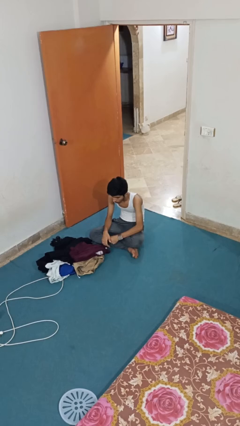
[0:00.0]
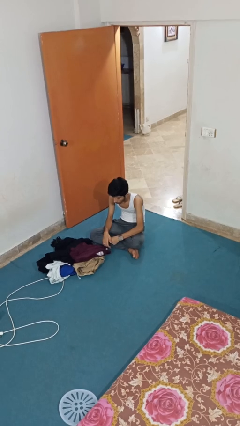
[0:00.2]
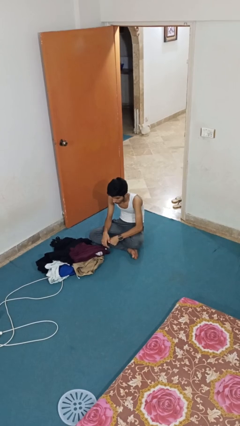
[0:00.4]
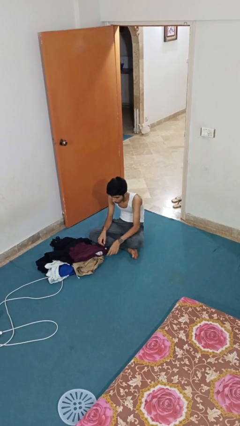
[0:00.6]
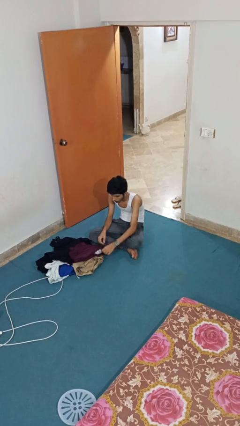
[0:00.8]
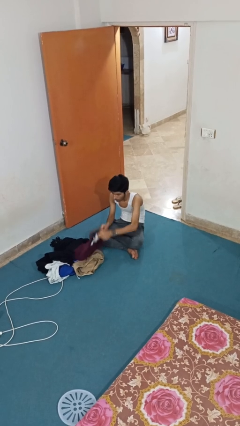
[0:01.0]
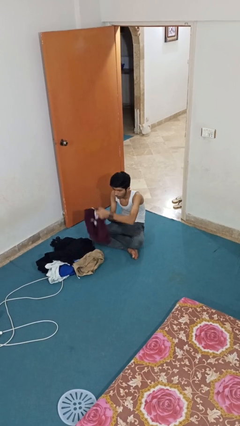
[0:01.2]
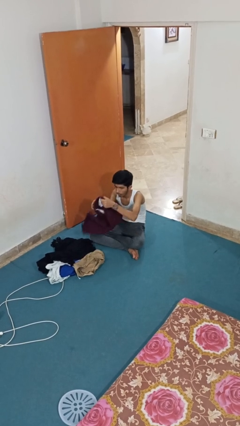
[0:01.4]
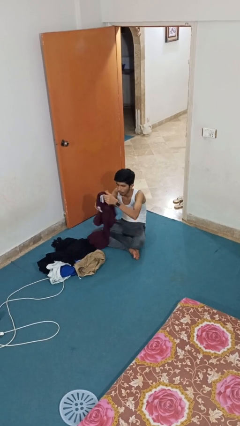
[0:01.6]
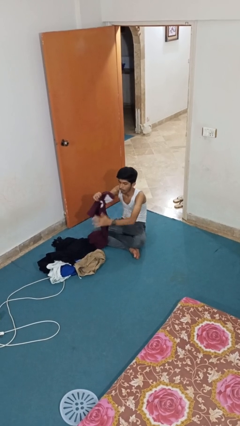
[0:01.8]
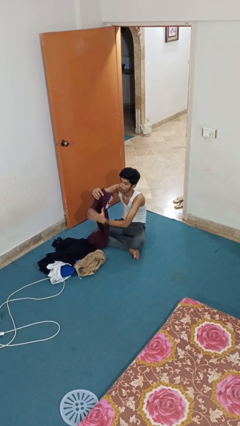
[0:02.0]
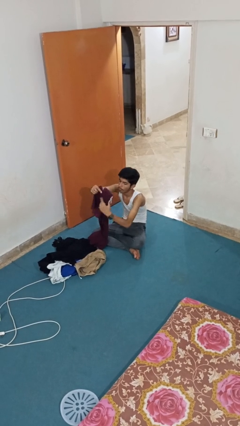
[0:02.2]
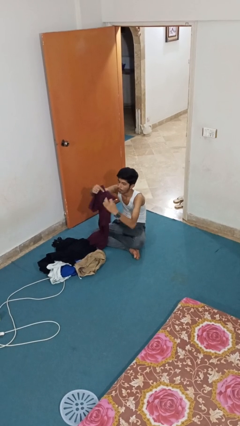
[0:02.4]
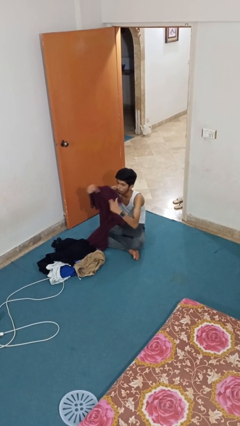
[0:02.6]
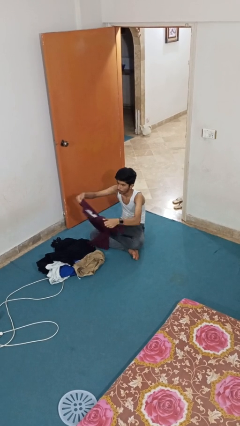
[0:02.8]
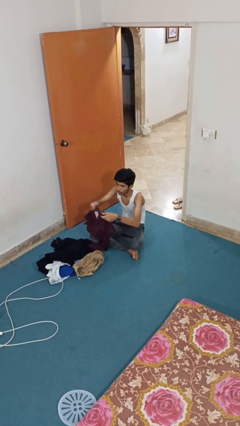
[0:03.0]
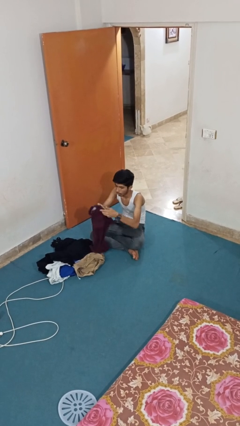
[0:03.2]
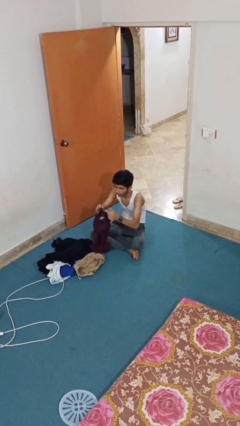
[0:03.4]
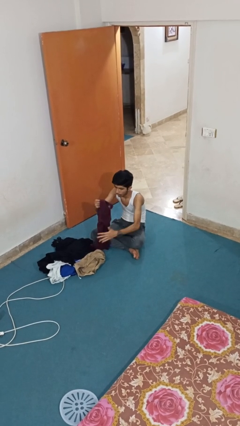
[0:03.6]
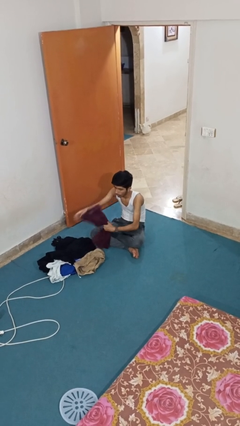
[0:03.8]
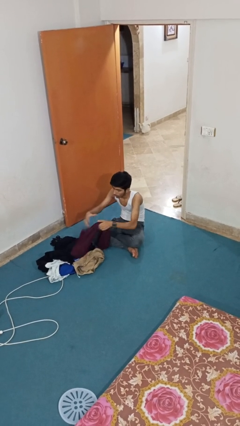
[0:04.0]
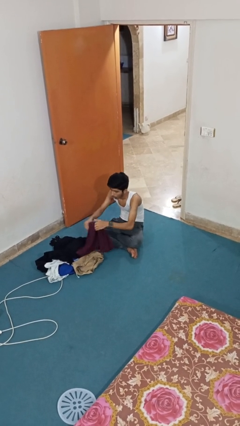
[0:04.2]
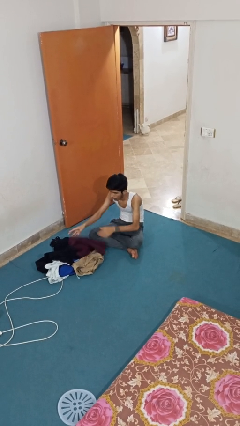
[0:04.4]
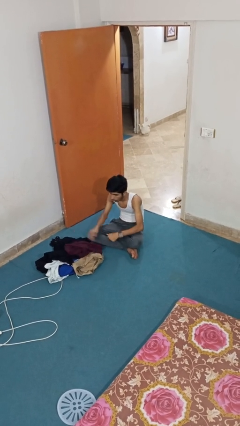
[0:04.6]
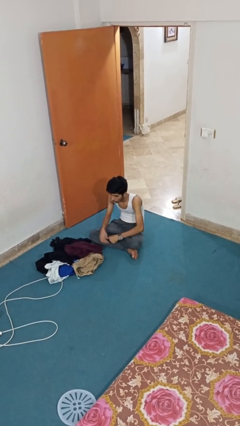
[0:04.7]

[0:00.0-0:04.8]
person folds shirt

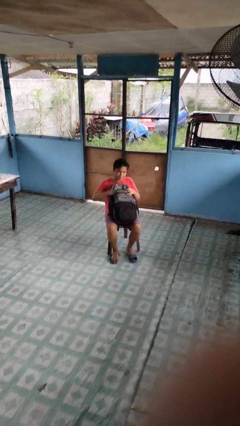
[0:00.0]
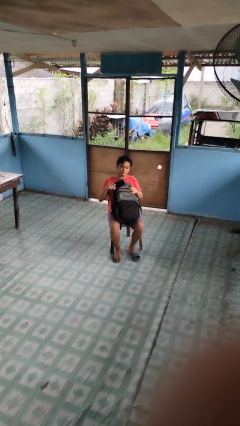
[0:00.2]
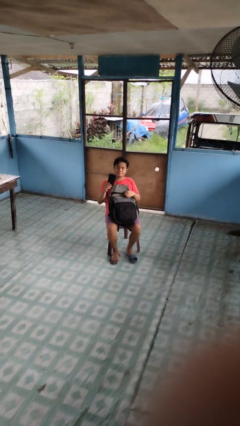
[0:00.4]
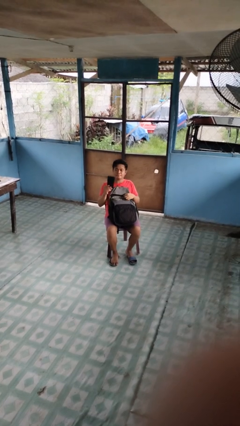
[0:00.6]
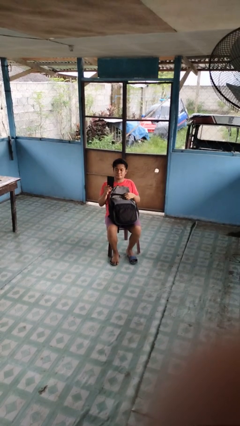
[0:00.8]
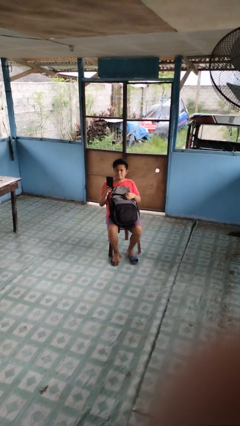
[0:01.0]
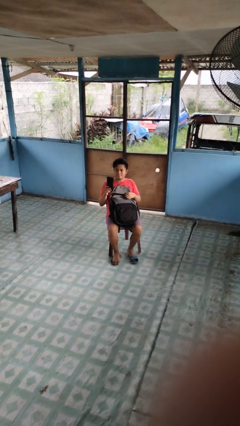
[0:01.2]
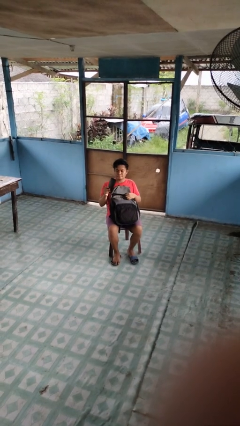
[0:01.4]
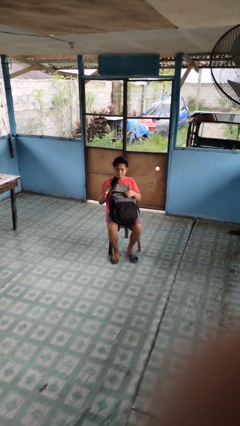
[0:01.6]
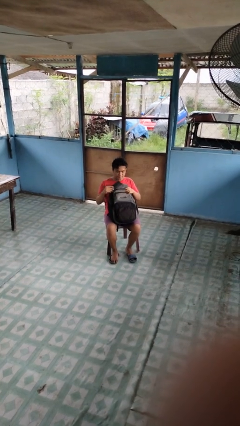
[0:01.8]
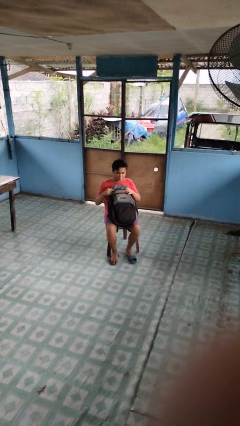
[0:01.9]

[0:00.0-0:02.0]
person takes object from backpack

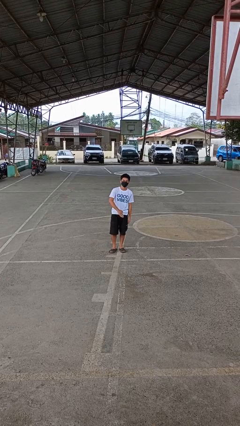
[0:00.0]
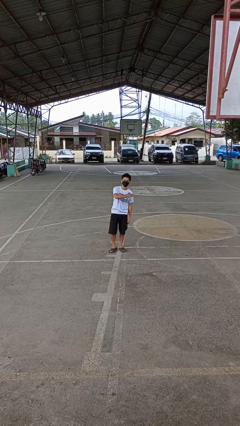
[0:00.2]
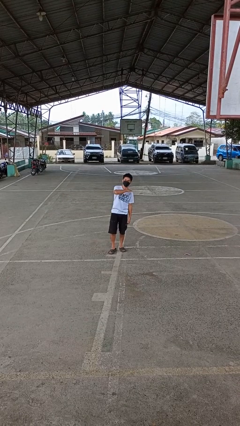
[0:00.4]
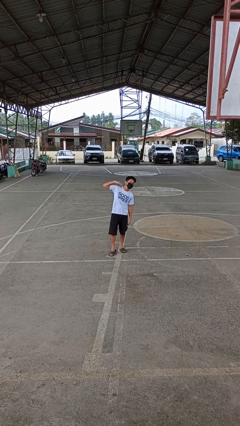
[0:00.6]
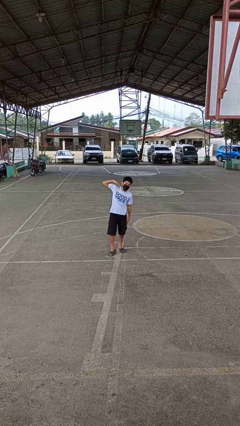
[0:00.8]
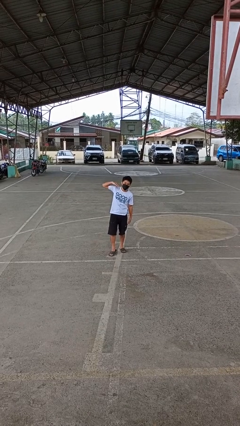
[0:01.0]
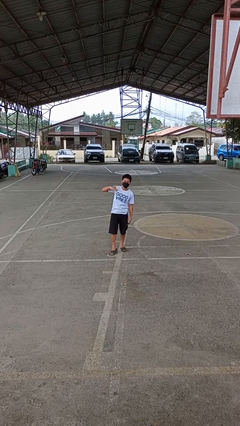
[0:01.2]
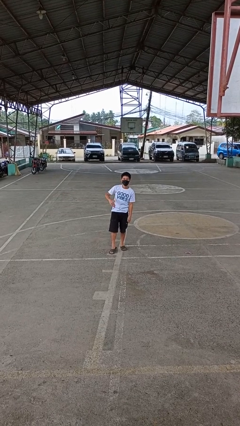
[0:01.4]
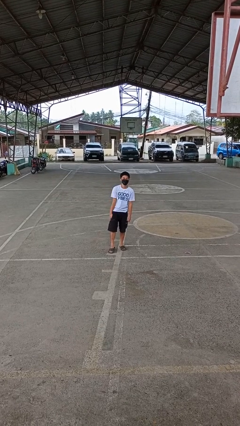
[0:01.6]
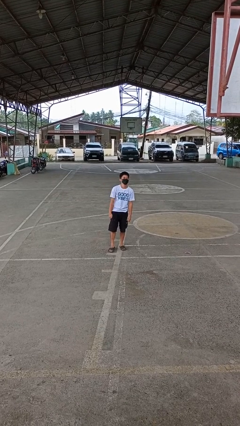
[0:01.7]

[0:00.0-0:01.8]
person gestures cut

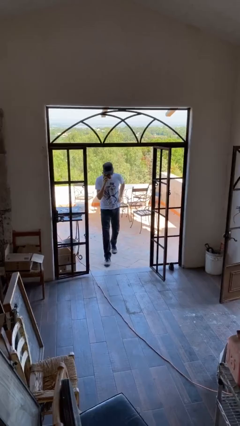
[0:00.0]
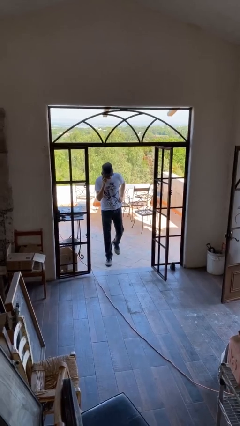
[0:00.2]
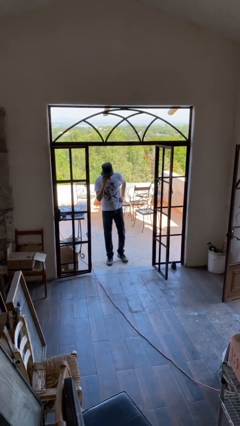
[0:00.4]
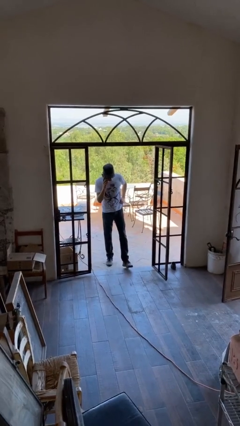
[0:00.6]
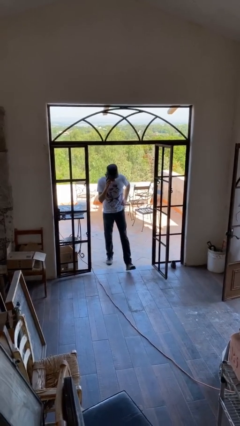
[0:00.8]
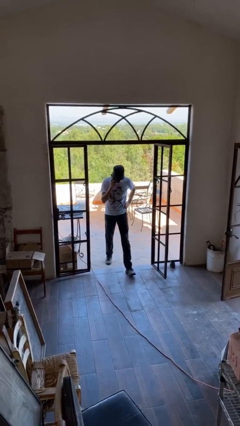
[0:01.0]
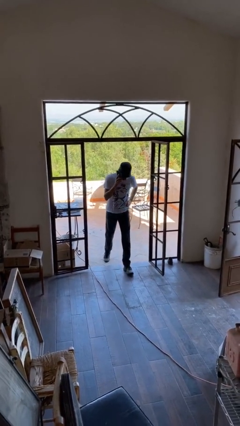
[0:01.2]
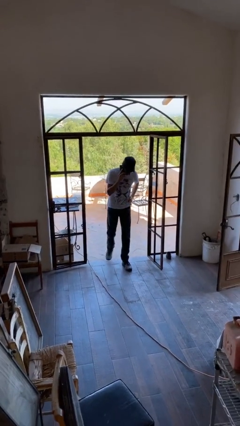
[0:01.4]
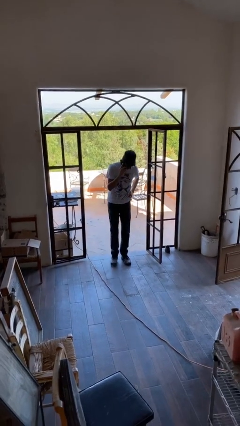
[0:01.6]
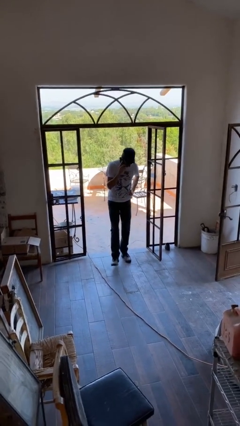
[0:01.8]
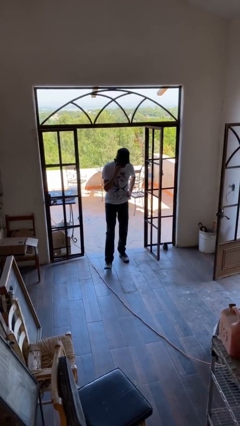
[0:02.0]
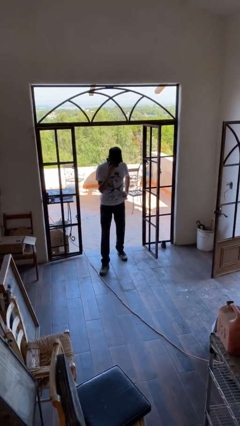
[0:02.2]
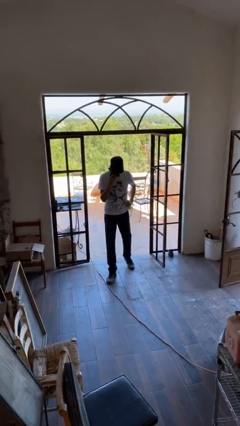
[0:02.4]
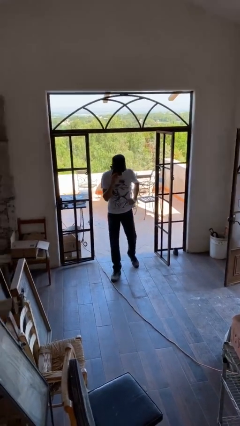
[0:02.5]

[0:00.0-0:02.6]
person enters scene through structure

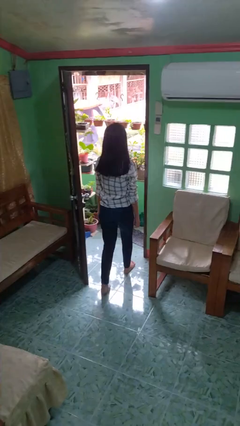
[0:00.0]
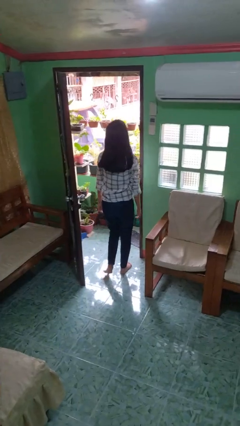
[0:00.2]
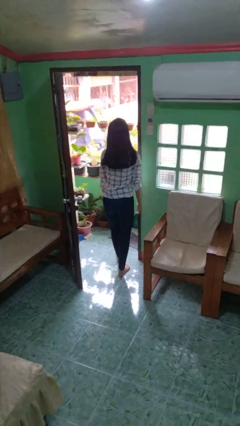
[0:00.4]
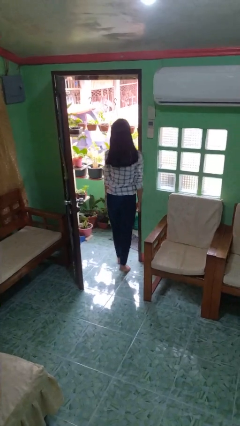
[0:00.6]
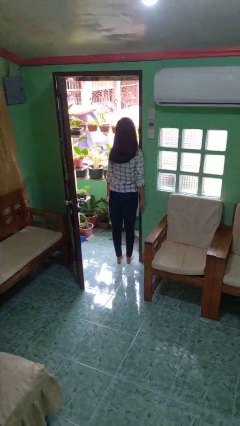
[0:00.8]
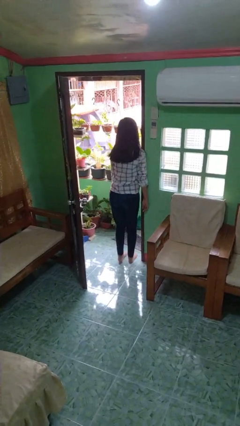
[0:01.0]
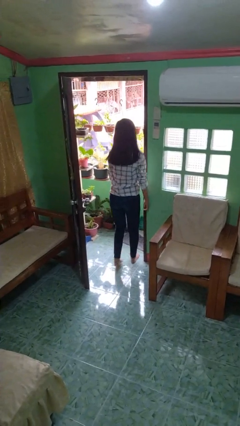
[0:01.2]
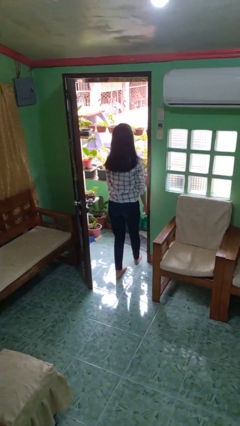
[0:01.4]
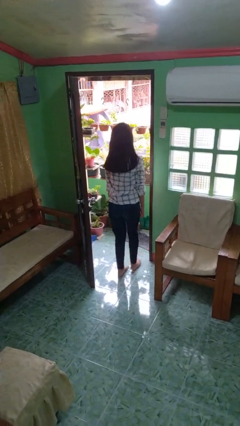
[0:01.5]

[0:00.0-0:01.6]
person bumps into wall

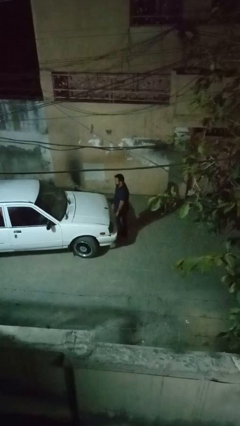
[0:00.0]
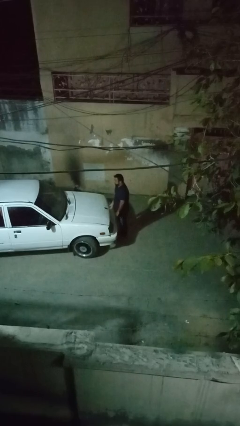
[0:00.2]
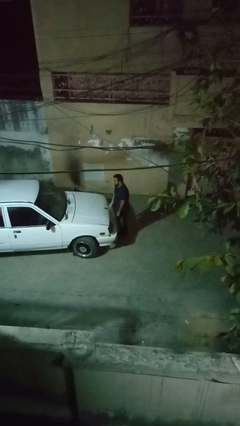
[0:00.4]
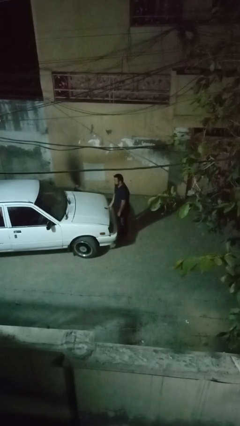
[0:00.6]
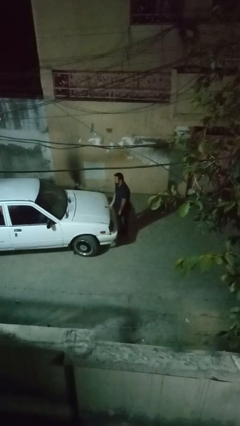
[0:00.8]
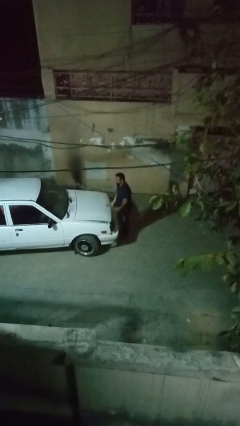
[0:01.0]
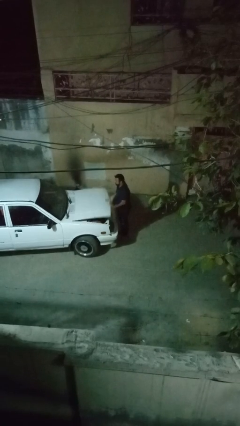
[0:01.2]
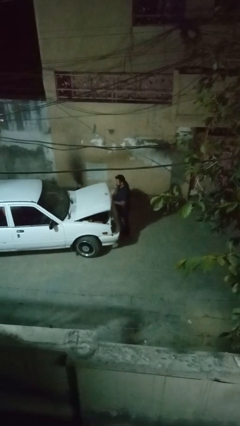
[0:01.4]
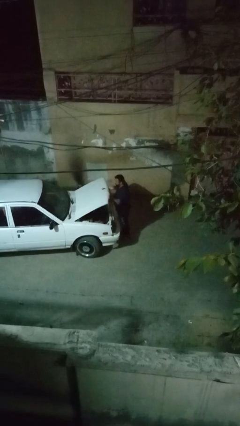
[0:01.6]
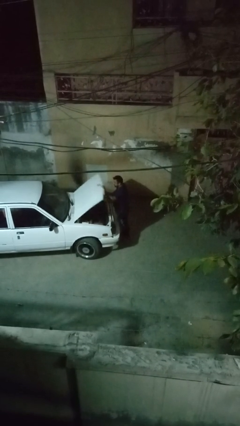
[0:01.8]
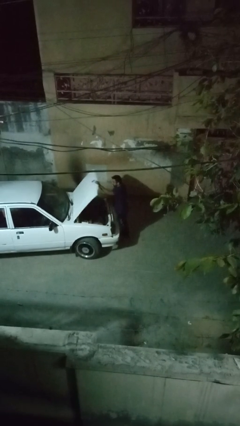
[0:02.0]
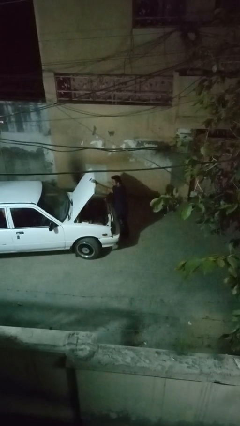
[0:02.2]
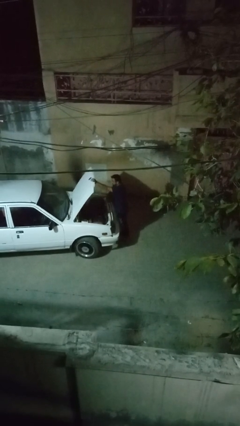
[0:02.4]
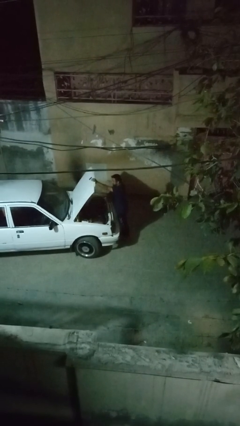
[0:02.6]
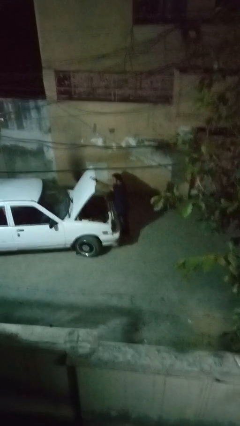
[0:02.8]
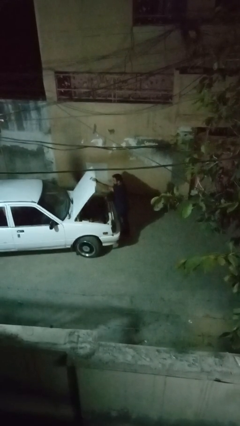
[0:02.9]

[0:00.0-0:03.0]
person opens car hood

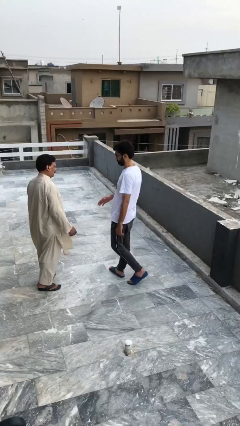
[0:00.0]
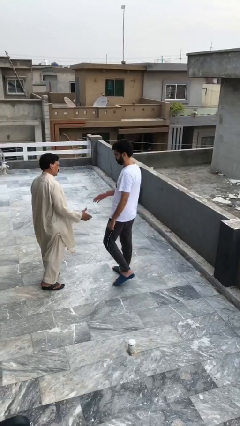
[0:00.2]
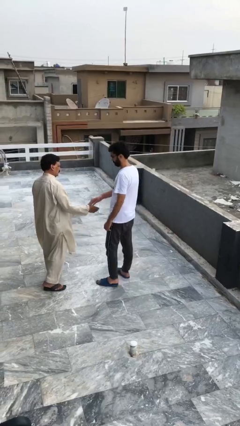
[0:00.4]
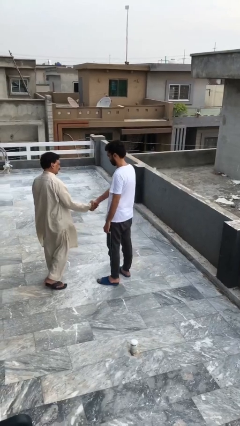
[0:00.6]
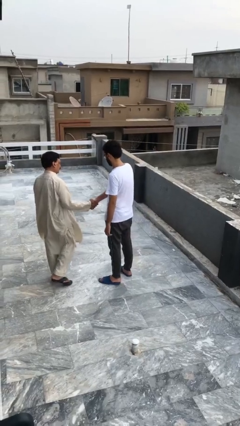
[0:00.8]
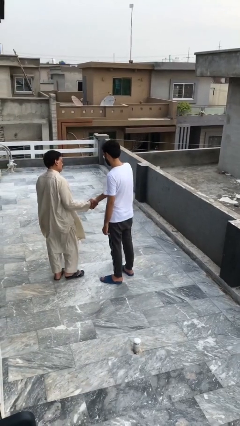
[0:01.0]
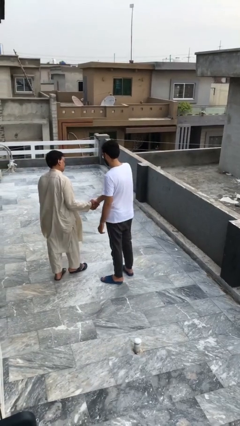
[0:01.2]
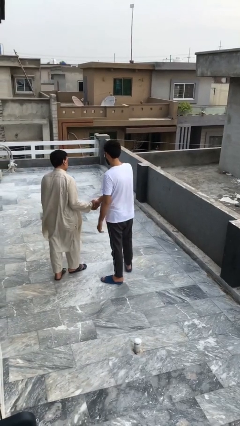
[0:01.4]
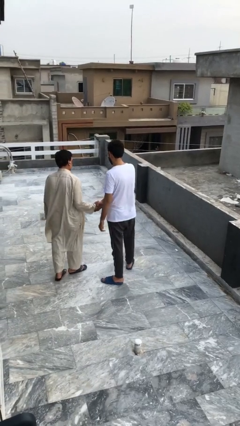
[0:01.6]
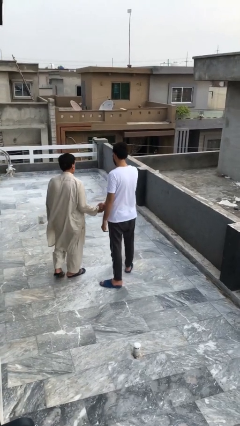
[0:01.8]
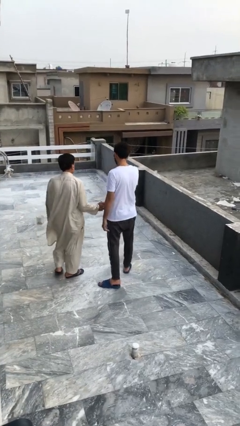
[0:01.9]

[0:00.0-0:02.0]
person shakes hand
